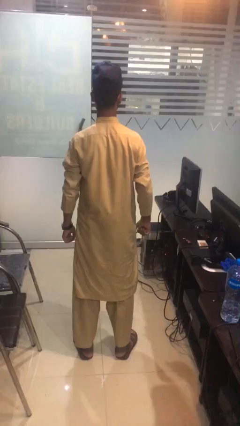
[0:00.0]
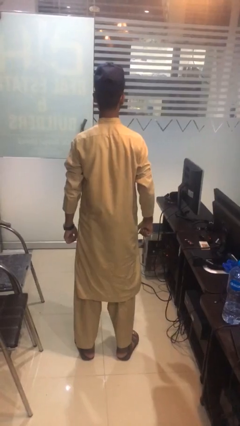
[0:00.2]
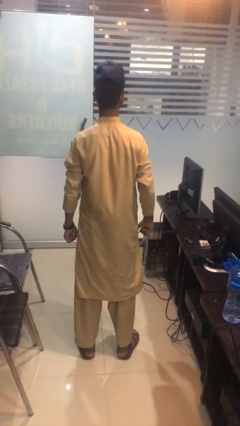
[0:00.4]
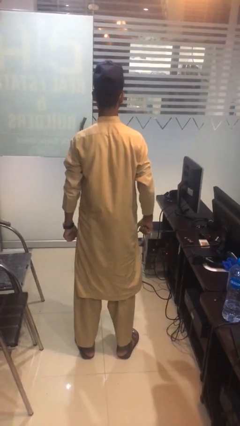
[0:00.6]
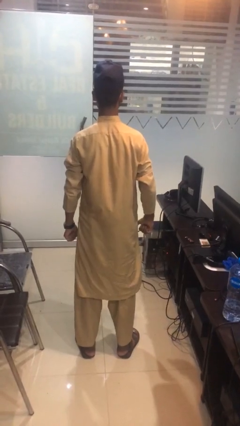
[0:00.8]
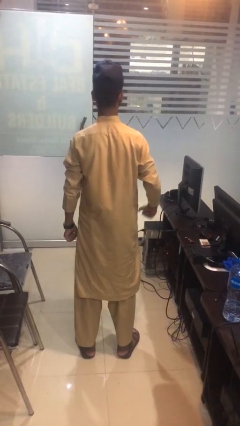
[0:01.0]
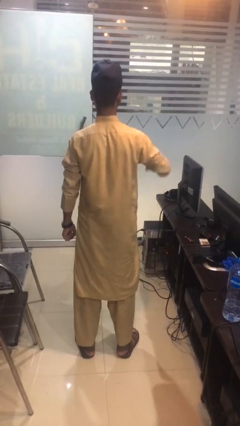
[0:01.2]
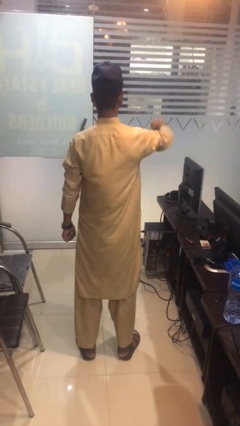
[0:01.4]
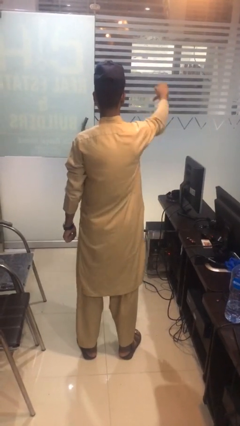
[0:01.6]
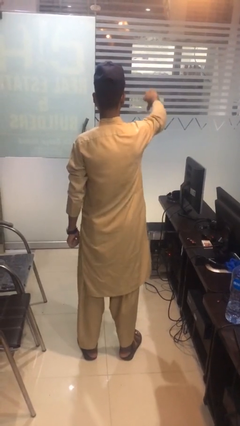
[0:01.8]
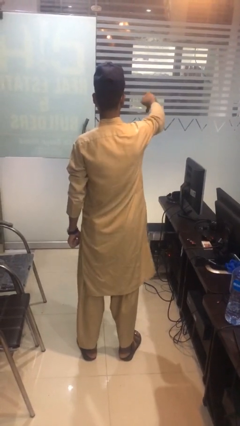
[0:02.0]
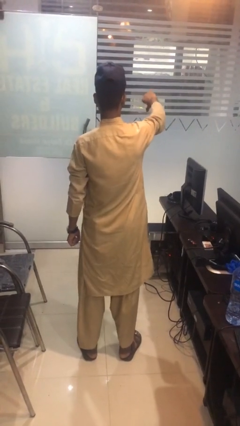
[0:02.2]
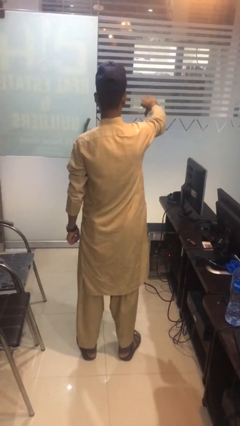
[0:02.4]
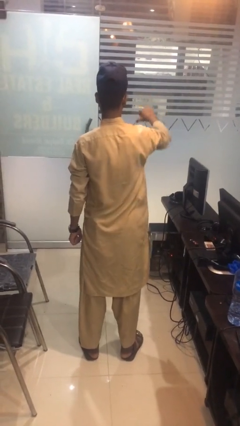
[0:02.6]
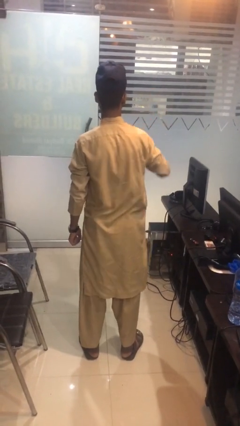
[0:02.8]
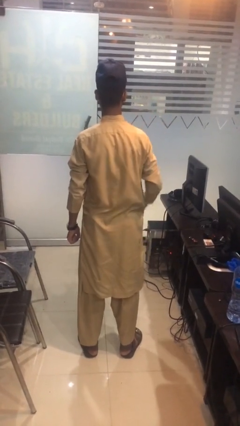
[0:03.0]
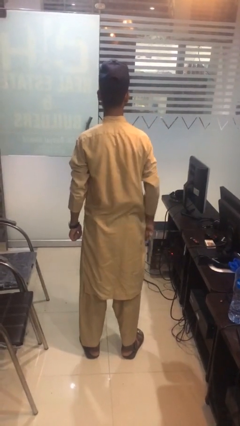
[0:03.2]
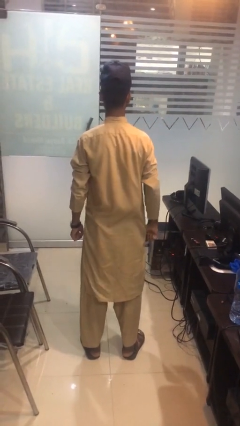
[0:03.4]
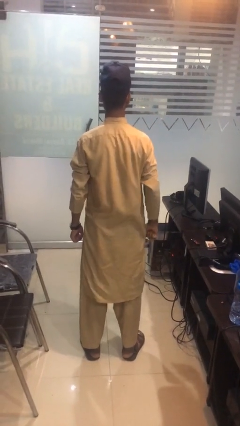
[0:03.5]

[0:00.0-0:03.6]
person gestures thumbs down

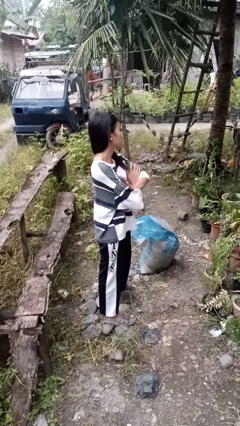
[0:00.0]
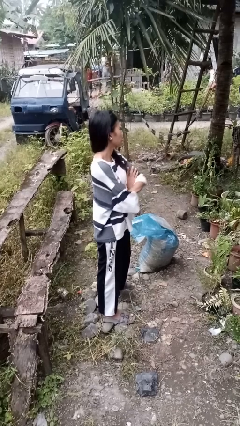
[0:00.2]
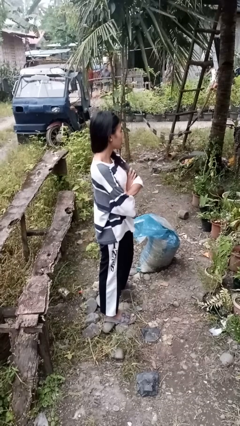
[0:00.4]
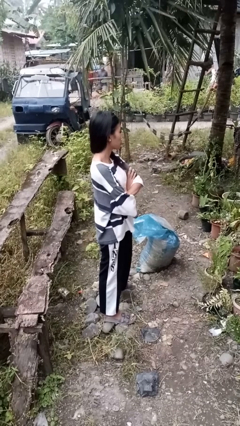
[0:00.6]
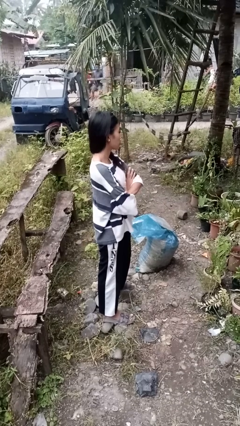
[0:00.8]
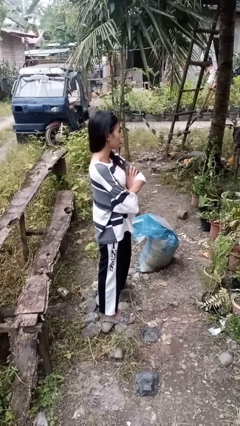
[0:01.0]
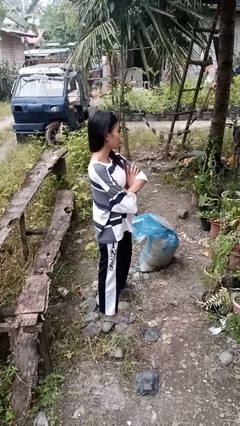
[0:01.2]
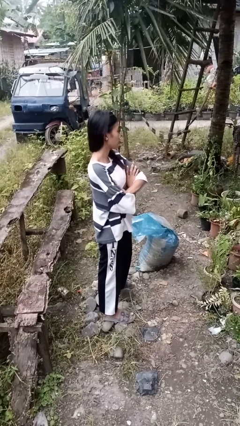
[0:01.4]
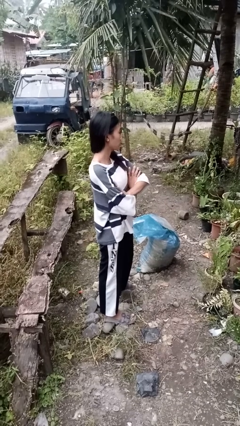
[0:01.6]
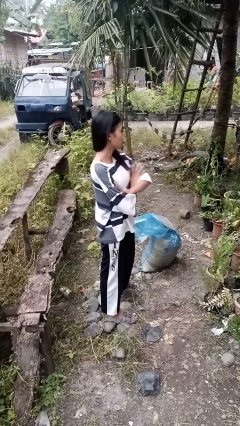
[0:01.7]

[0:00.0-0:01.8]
person crosses arms

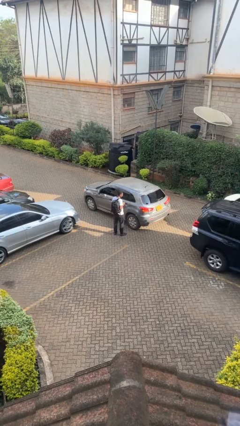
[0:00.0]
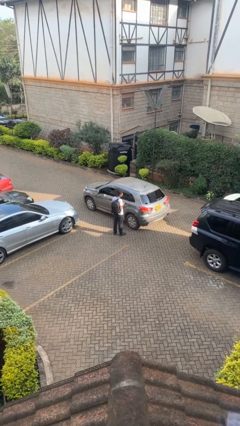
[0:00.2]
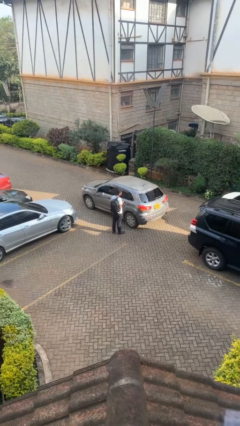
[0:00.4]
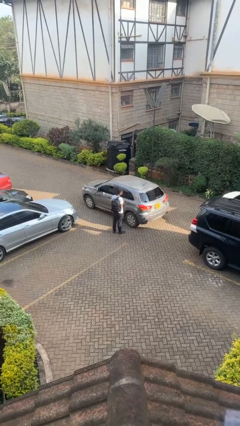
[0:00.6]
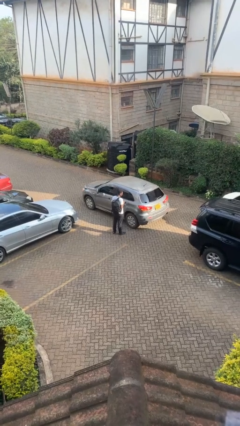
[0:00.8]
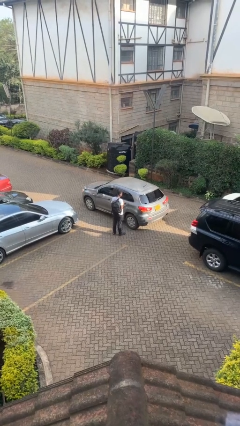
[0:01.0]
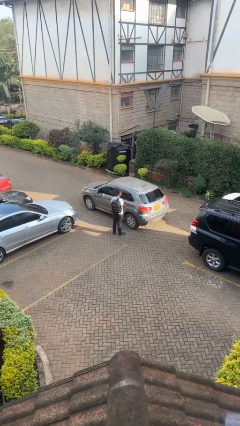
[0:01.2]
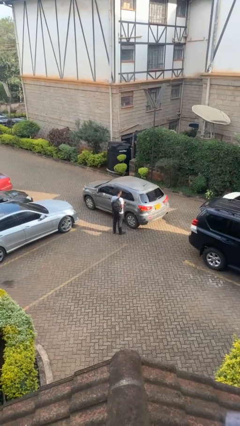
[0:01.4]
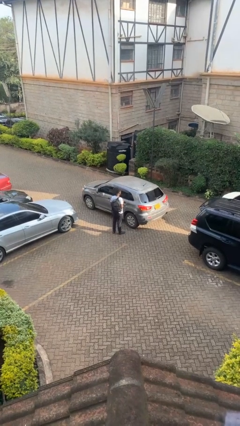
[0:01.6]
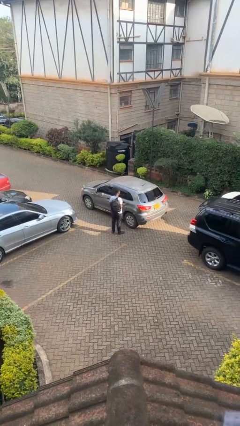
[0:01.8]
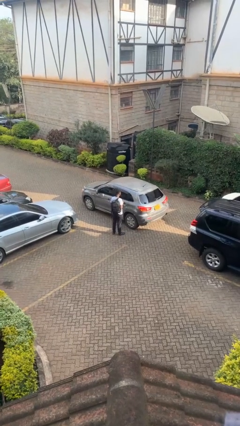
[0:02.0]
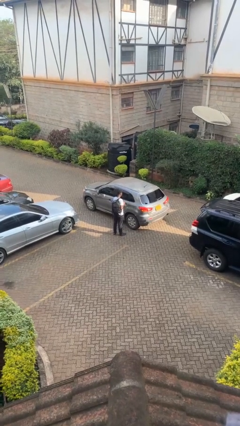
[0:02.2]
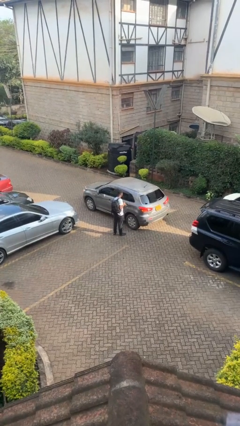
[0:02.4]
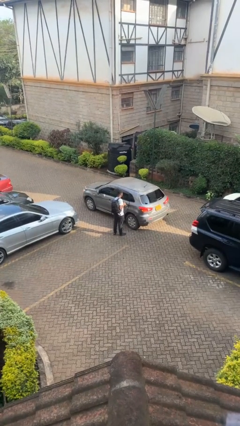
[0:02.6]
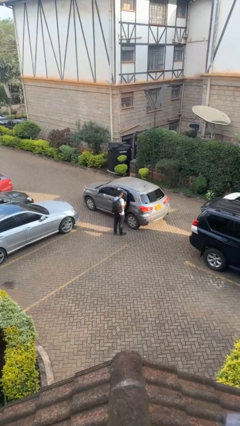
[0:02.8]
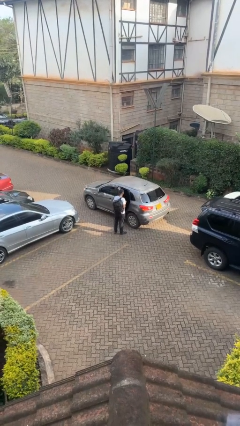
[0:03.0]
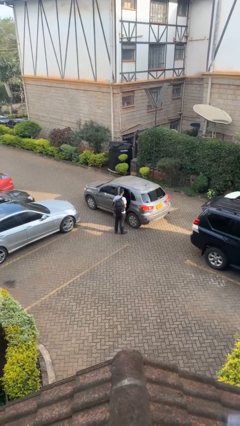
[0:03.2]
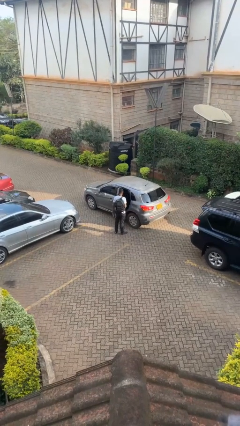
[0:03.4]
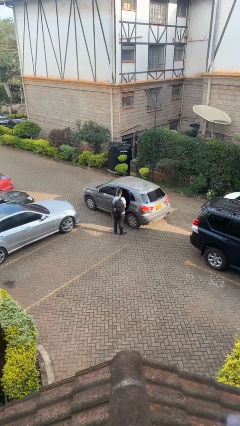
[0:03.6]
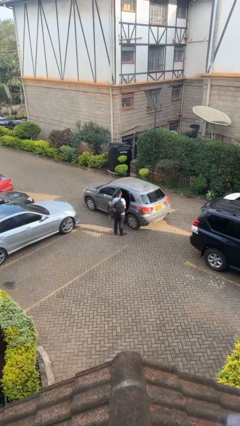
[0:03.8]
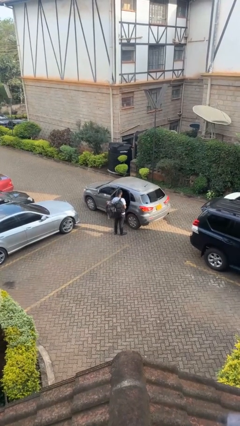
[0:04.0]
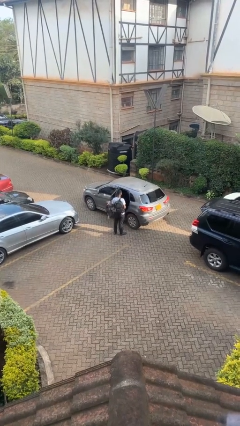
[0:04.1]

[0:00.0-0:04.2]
person opens car door

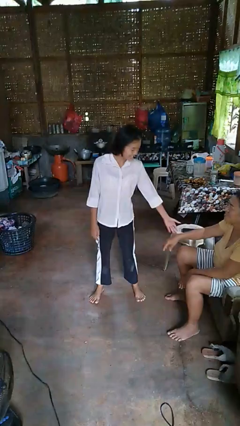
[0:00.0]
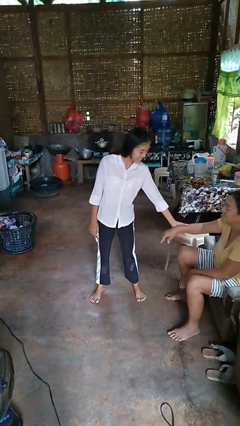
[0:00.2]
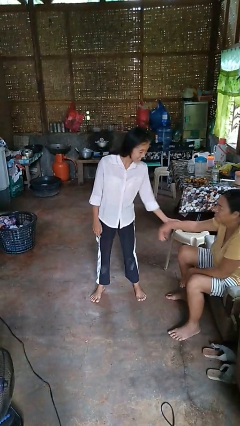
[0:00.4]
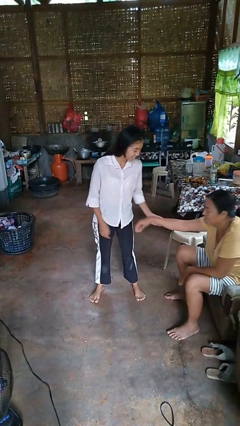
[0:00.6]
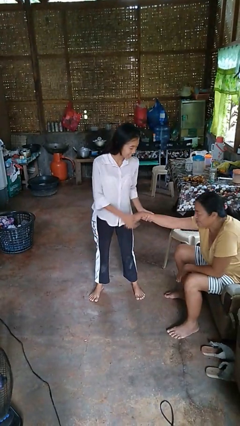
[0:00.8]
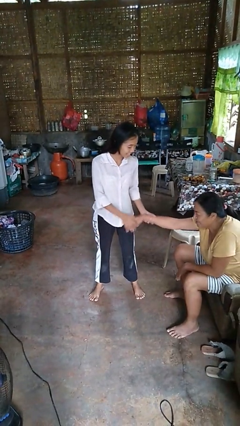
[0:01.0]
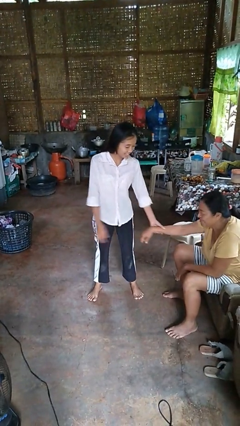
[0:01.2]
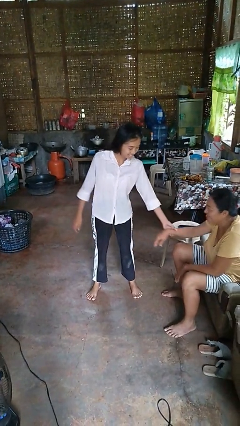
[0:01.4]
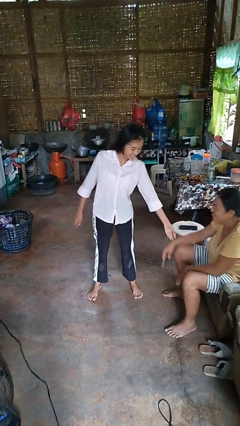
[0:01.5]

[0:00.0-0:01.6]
person grabs person by forearm

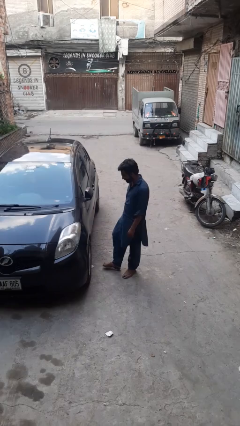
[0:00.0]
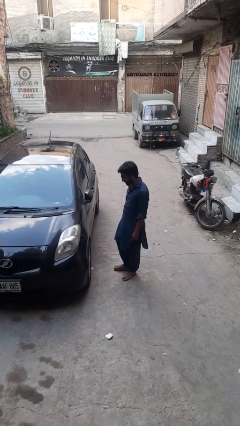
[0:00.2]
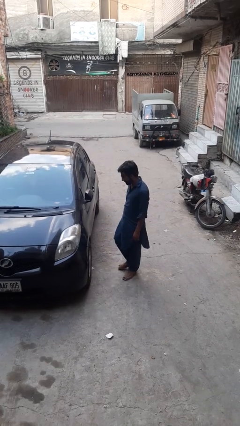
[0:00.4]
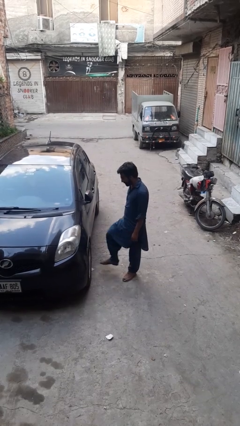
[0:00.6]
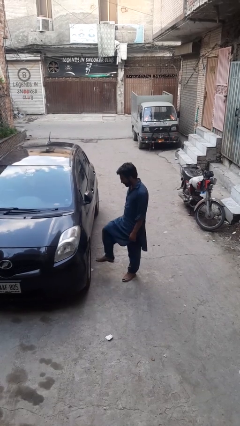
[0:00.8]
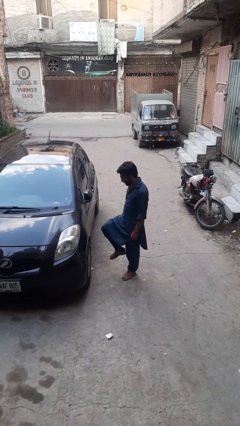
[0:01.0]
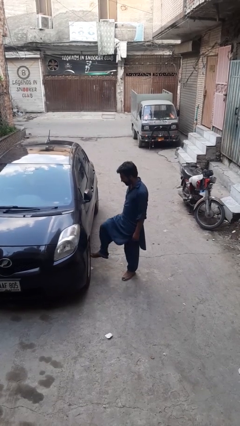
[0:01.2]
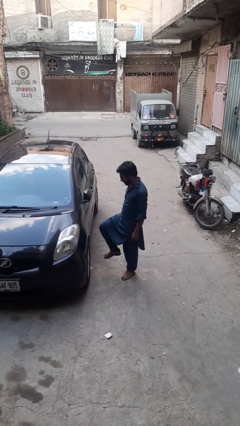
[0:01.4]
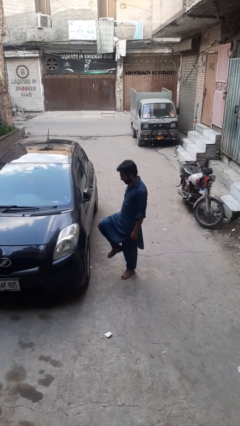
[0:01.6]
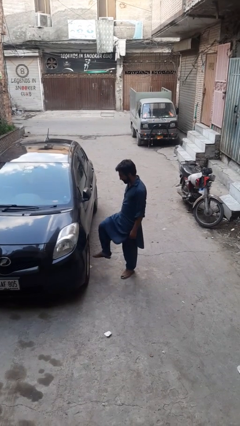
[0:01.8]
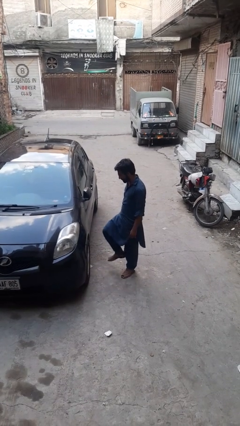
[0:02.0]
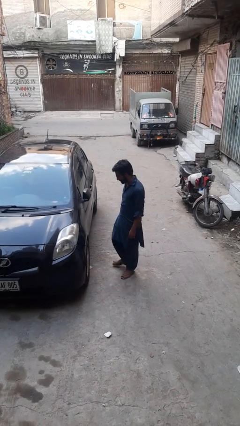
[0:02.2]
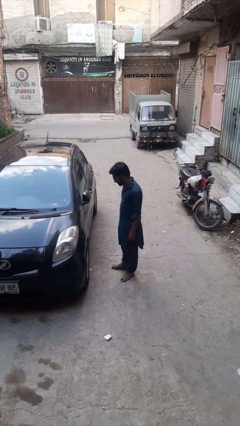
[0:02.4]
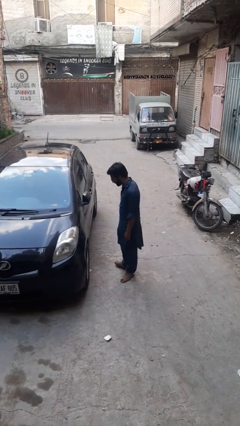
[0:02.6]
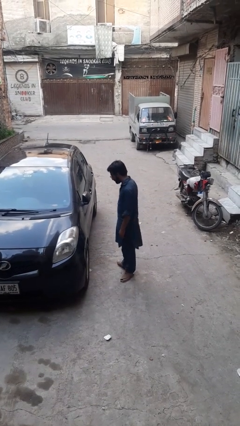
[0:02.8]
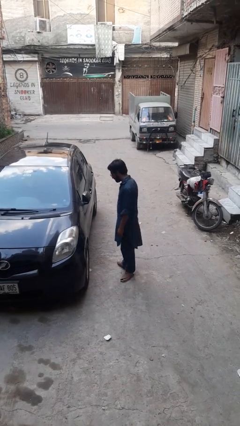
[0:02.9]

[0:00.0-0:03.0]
person kicks car tires

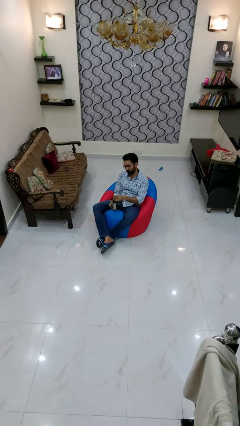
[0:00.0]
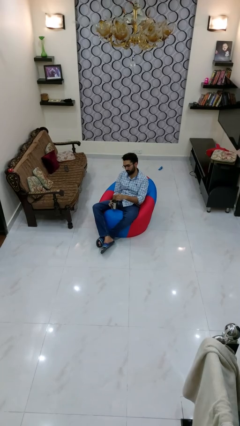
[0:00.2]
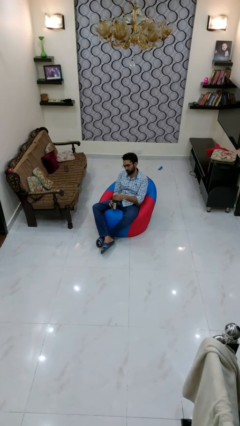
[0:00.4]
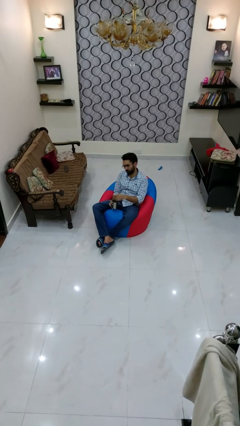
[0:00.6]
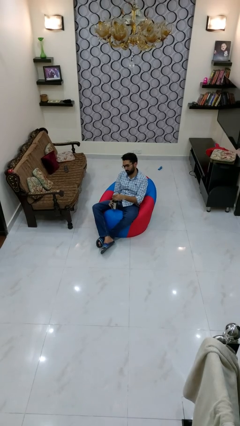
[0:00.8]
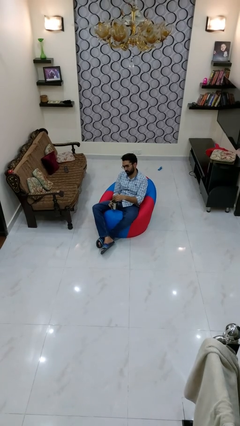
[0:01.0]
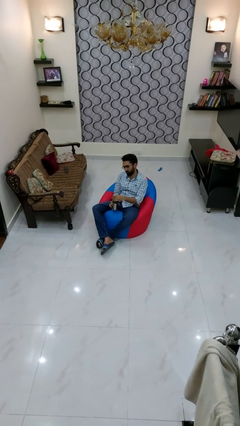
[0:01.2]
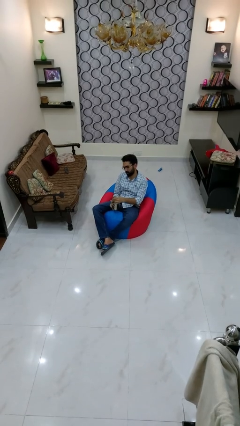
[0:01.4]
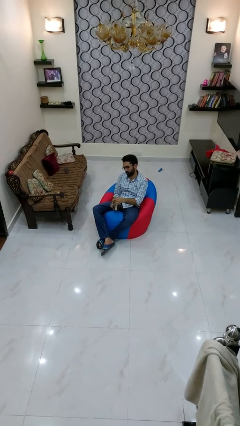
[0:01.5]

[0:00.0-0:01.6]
person stirs mug

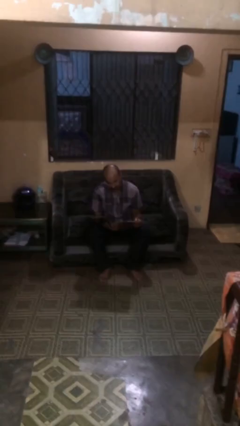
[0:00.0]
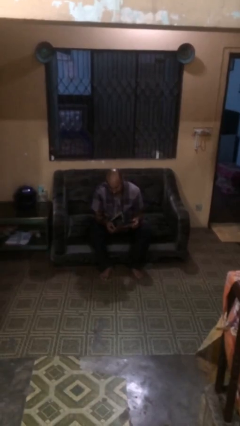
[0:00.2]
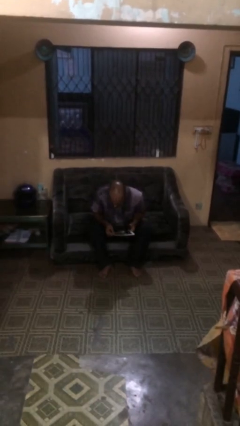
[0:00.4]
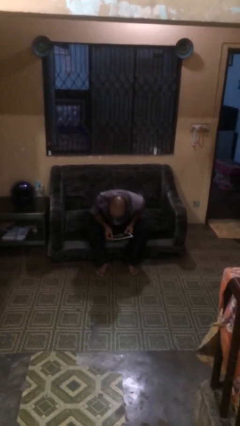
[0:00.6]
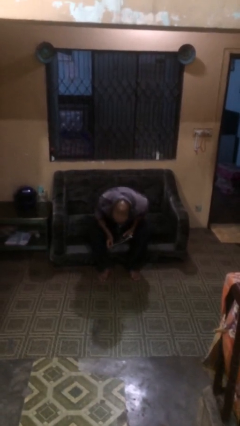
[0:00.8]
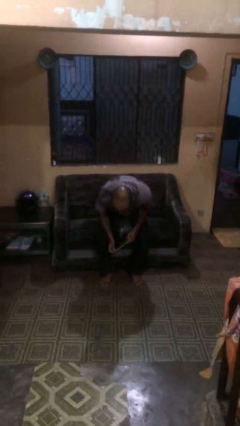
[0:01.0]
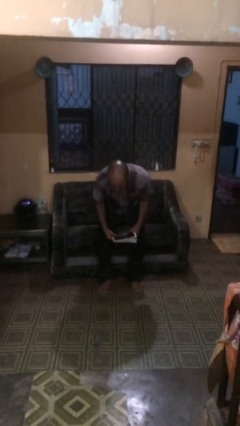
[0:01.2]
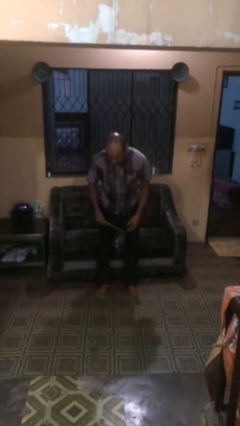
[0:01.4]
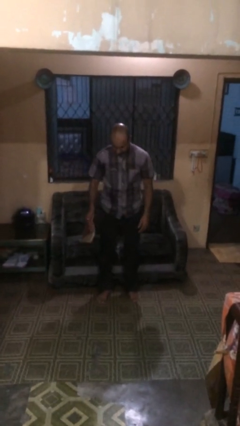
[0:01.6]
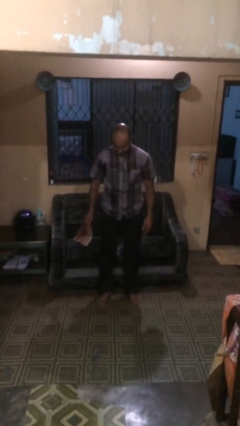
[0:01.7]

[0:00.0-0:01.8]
person stands up
